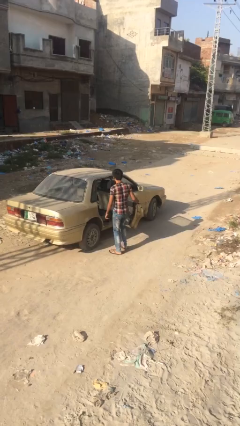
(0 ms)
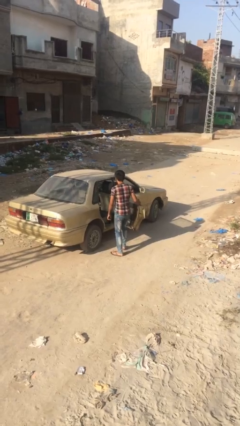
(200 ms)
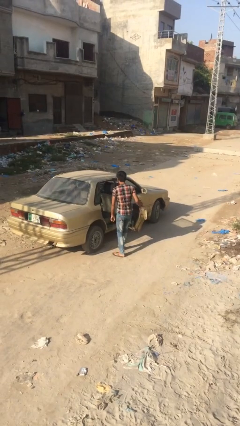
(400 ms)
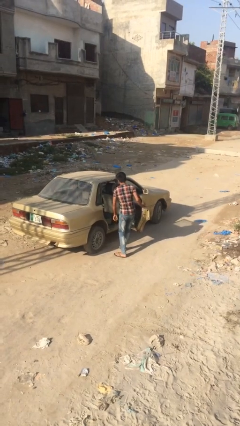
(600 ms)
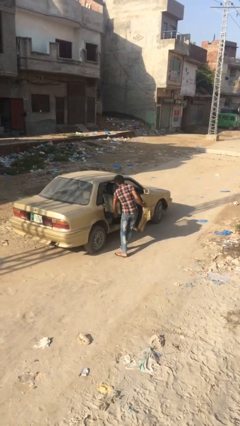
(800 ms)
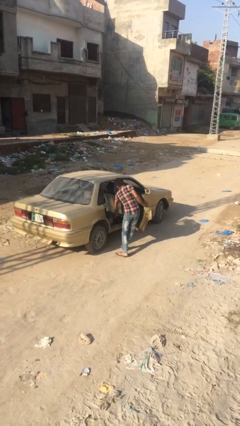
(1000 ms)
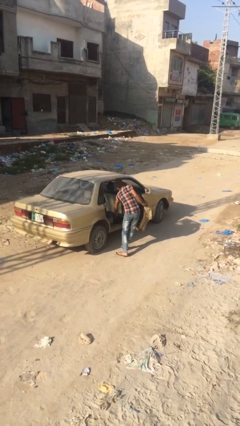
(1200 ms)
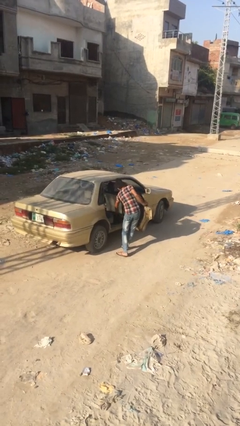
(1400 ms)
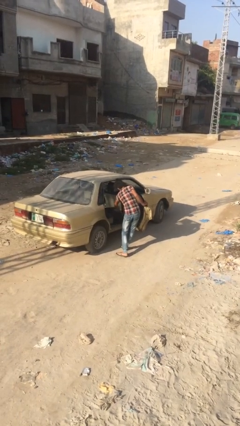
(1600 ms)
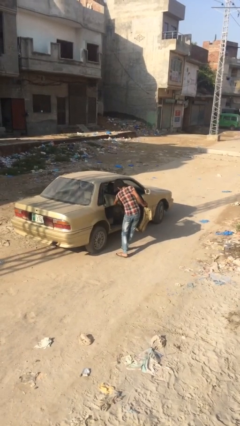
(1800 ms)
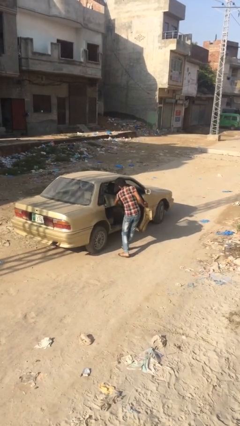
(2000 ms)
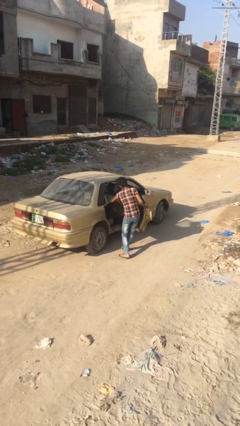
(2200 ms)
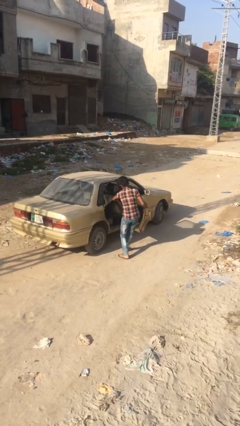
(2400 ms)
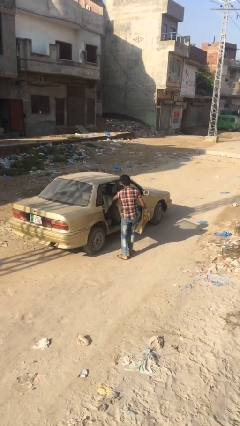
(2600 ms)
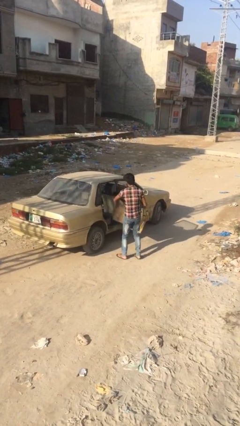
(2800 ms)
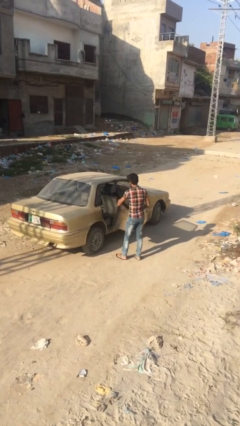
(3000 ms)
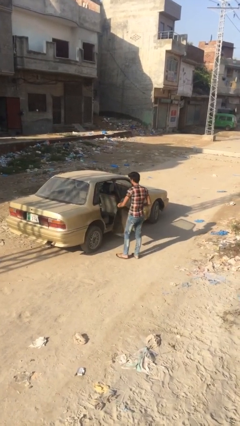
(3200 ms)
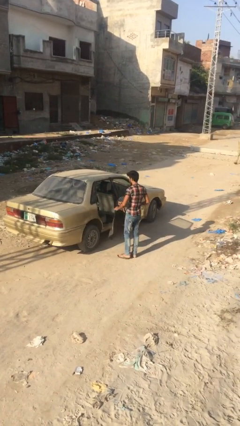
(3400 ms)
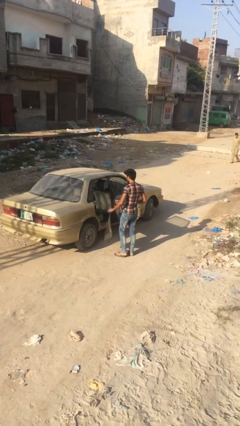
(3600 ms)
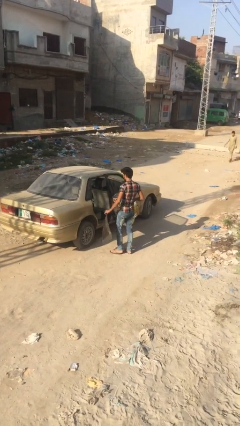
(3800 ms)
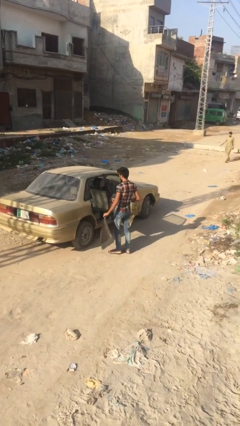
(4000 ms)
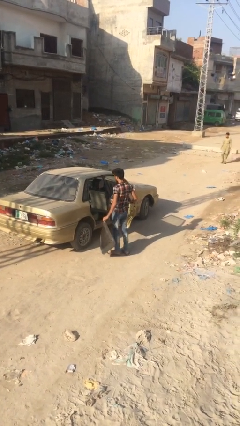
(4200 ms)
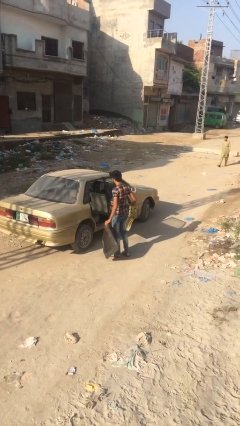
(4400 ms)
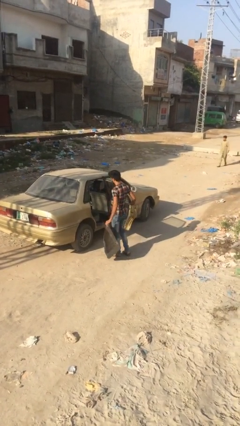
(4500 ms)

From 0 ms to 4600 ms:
person unloads car

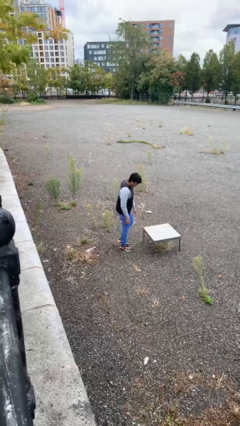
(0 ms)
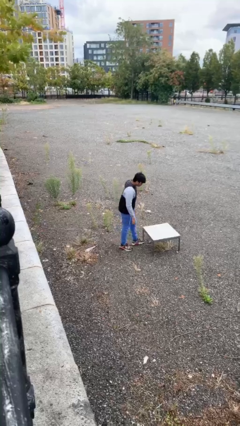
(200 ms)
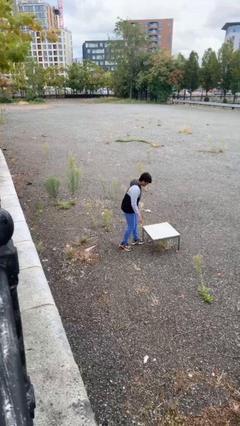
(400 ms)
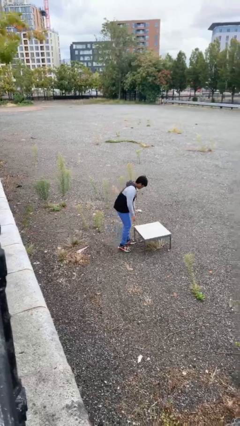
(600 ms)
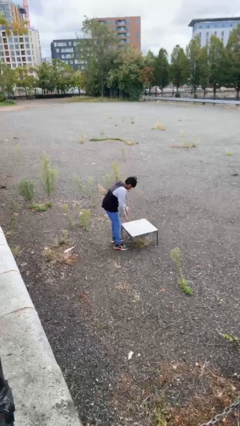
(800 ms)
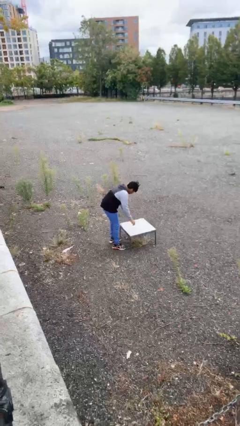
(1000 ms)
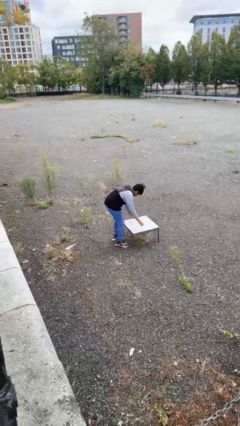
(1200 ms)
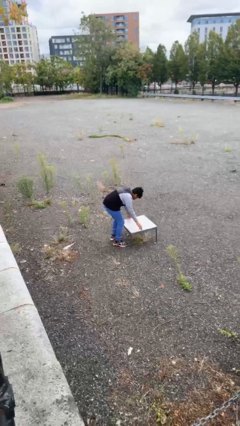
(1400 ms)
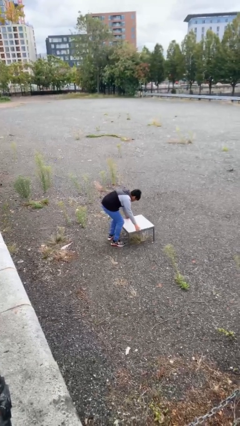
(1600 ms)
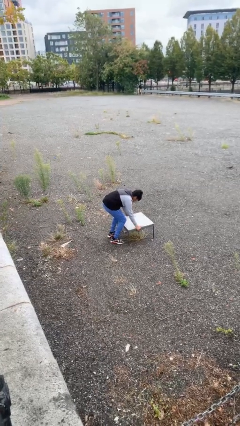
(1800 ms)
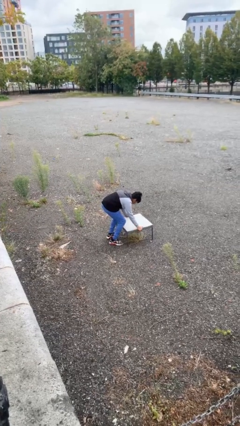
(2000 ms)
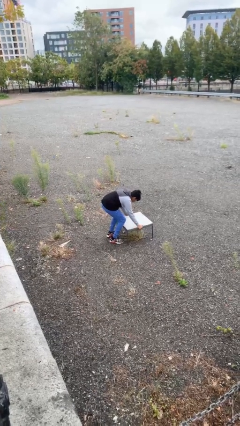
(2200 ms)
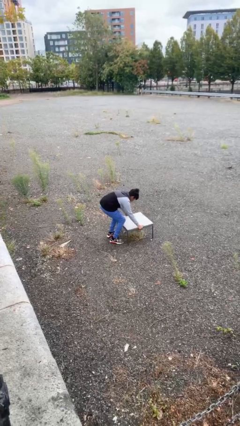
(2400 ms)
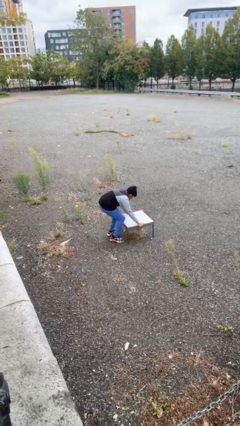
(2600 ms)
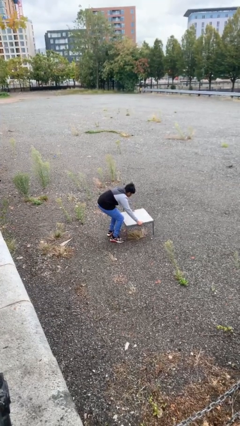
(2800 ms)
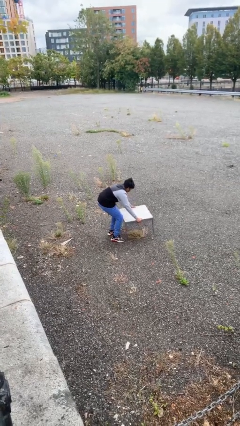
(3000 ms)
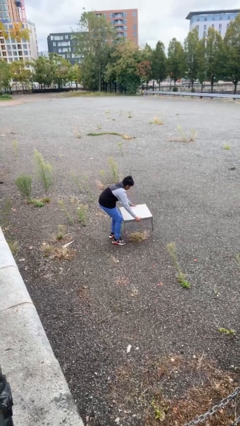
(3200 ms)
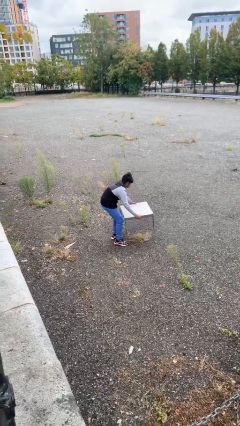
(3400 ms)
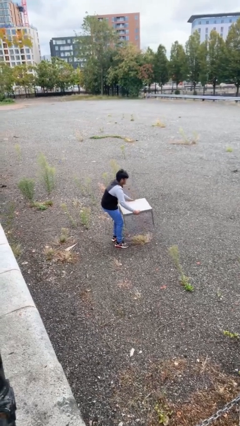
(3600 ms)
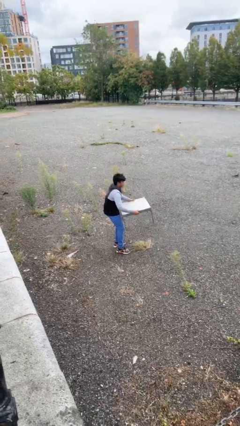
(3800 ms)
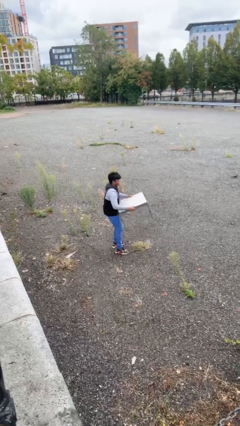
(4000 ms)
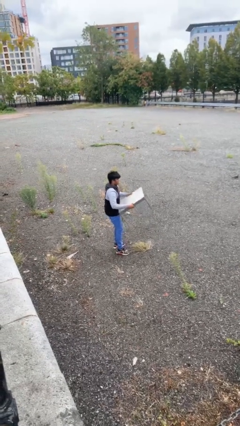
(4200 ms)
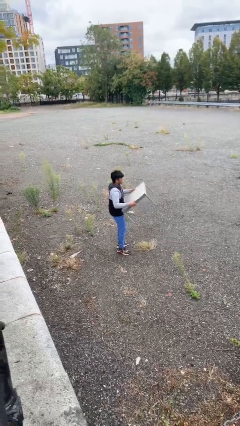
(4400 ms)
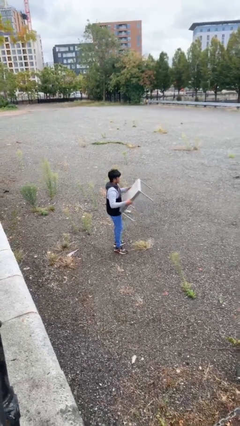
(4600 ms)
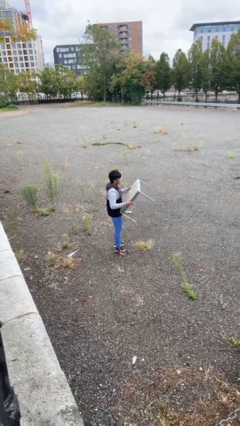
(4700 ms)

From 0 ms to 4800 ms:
person picks up object from floor

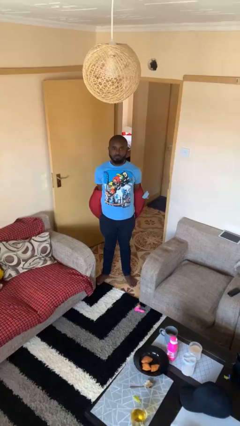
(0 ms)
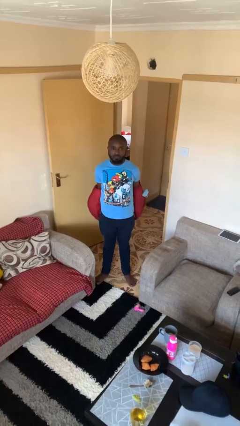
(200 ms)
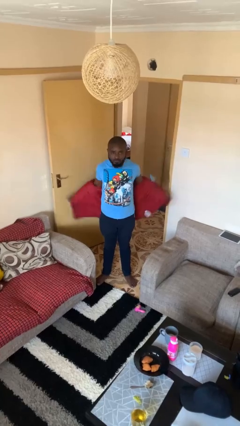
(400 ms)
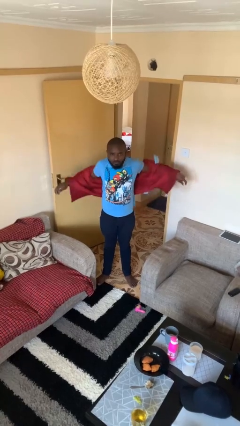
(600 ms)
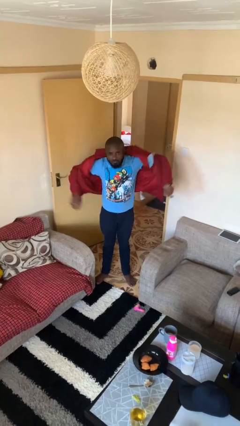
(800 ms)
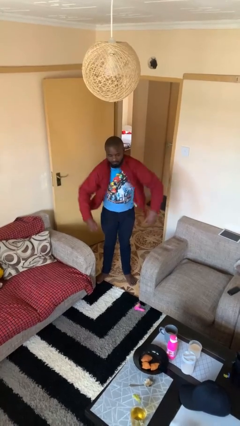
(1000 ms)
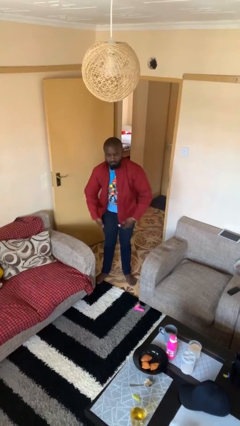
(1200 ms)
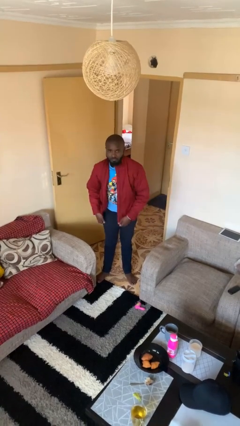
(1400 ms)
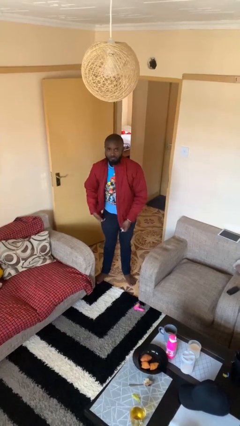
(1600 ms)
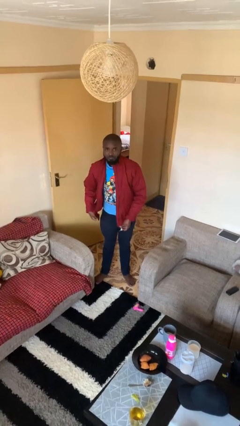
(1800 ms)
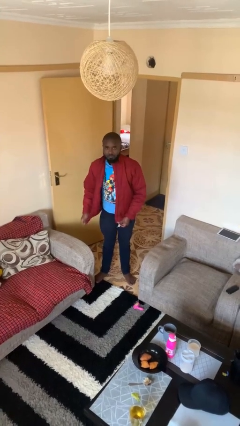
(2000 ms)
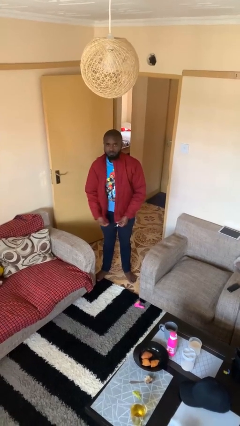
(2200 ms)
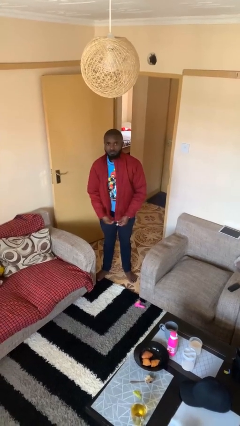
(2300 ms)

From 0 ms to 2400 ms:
person puts on jacket

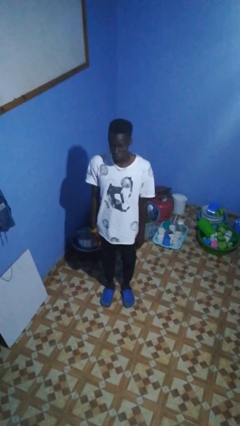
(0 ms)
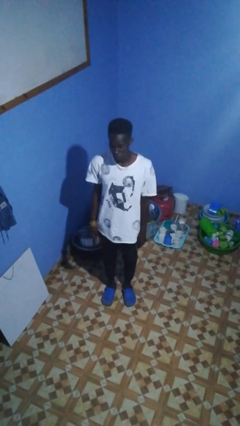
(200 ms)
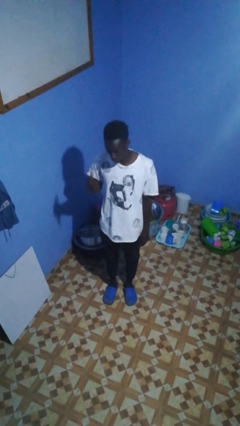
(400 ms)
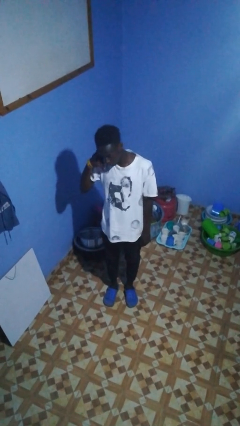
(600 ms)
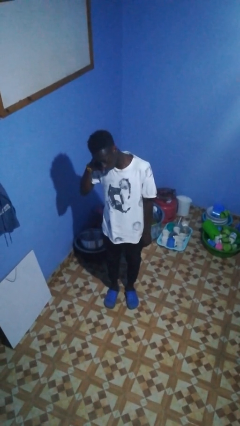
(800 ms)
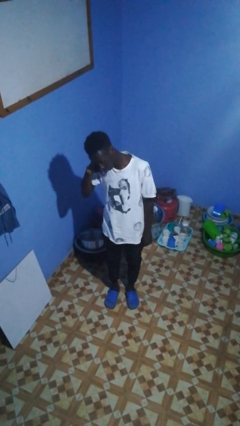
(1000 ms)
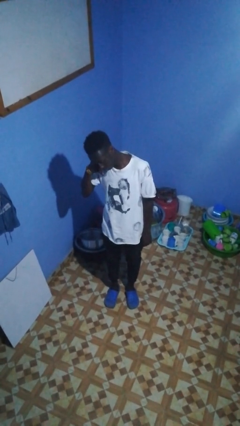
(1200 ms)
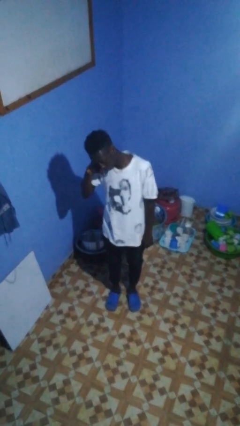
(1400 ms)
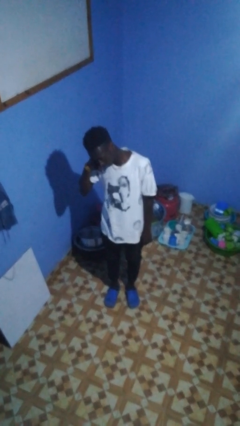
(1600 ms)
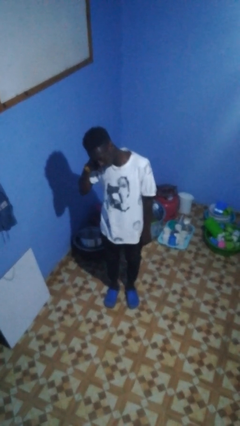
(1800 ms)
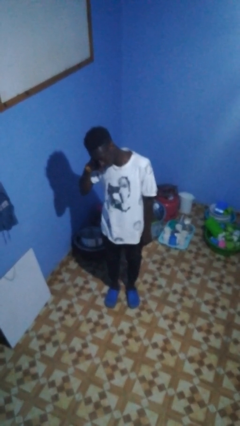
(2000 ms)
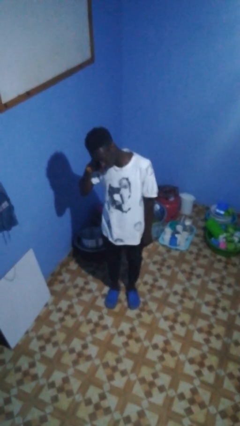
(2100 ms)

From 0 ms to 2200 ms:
person gestures call me

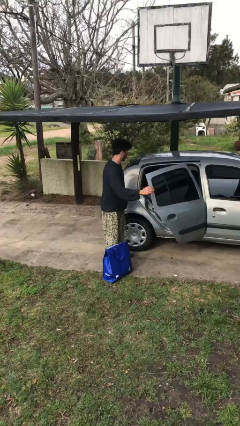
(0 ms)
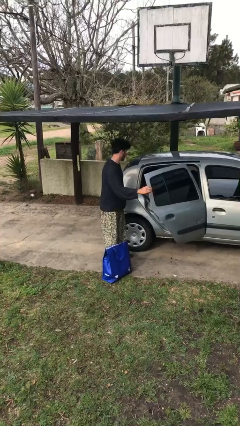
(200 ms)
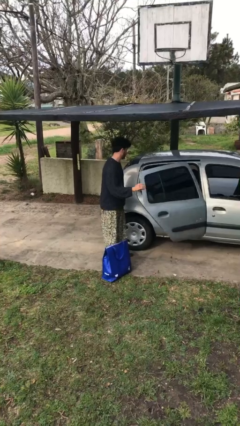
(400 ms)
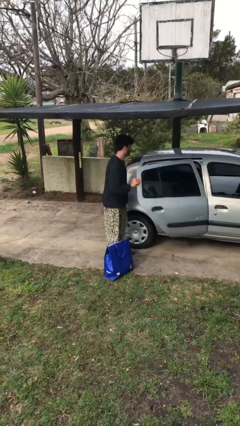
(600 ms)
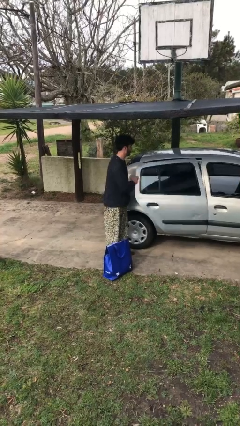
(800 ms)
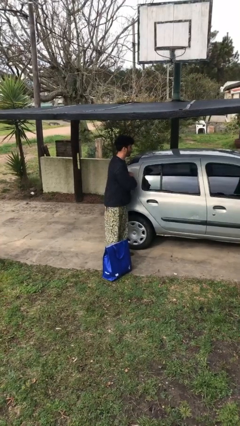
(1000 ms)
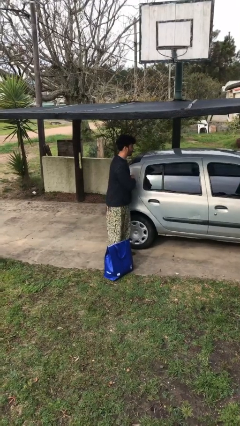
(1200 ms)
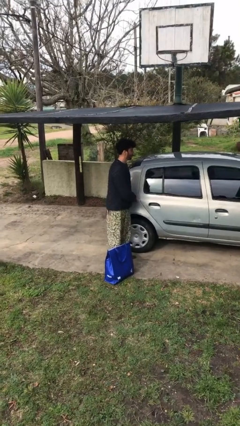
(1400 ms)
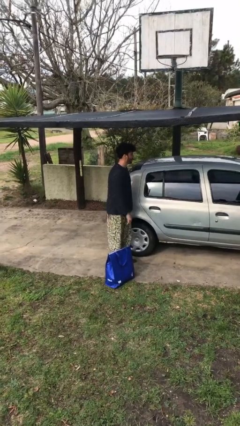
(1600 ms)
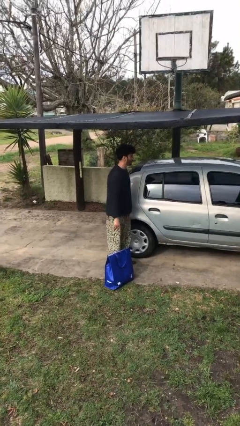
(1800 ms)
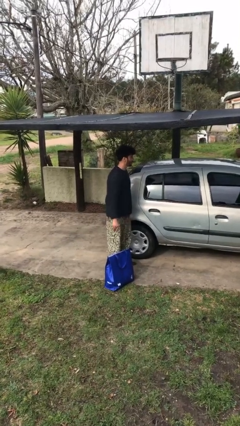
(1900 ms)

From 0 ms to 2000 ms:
person closes car door

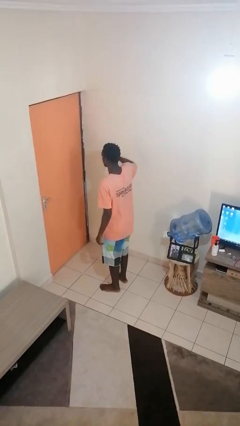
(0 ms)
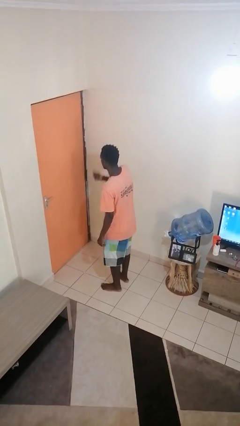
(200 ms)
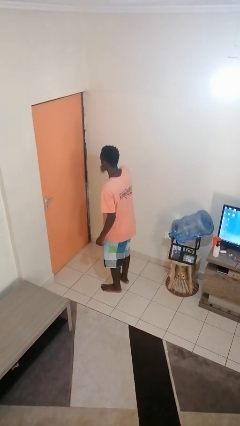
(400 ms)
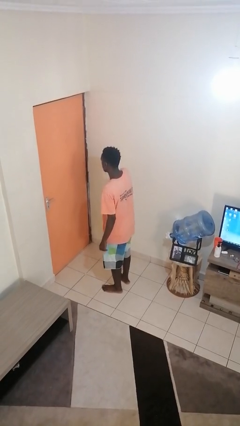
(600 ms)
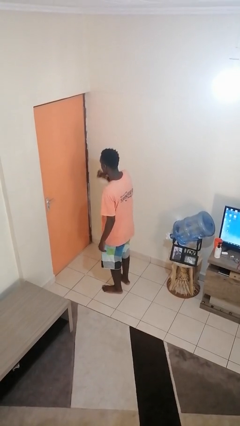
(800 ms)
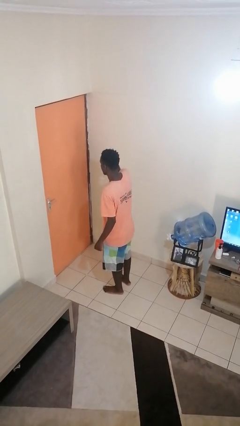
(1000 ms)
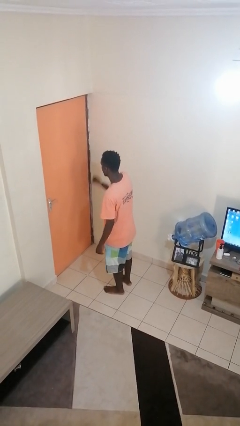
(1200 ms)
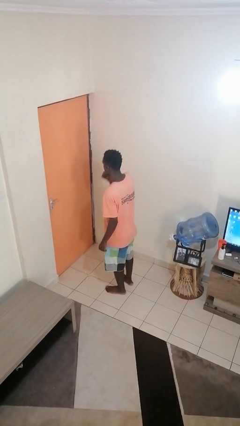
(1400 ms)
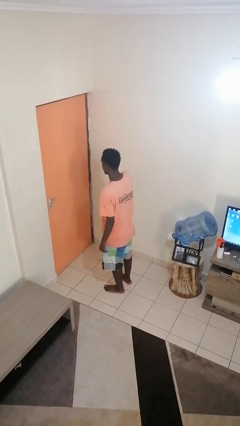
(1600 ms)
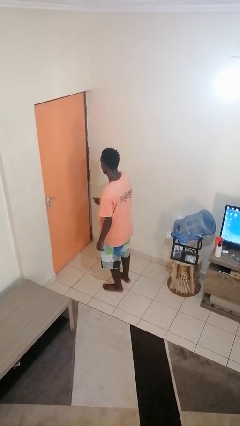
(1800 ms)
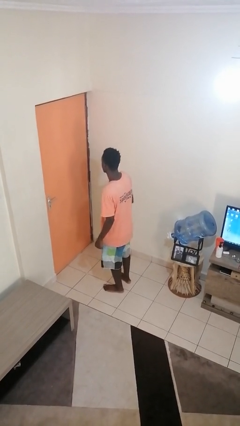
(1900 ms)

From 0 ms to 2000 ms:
person snaps fingers
